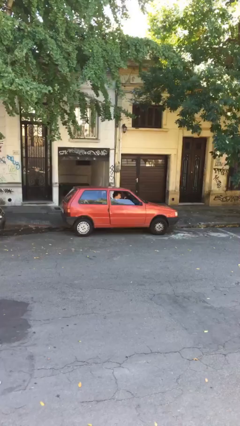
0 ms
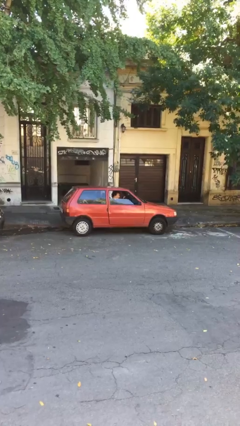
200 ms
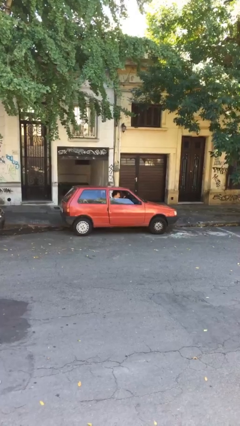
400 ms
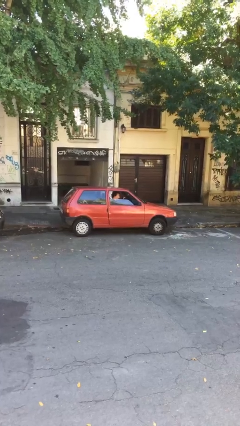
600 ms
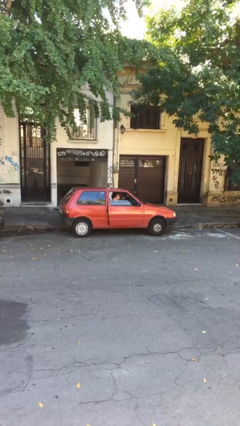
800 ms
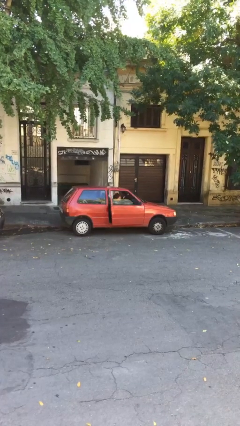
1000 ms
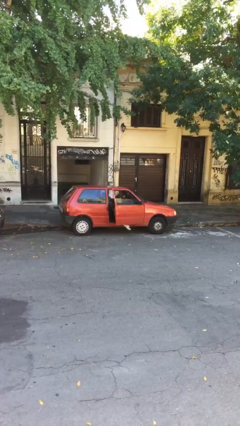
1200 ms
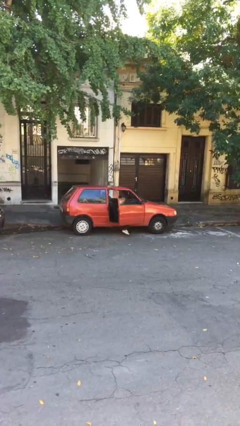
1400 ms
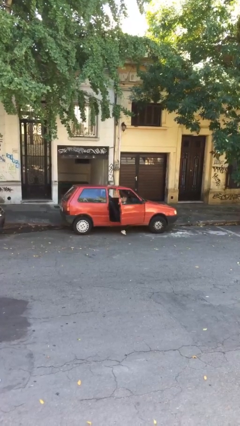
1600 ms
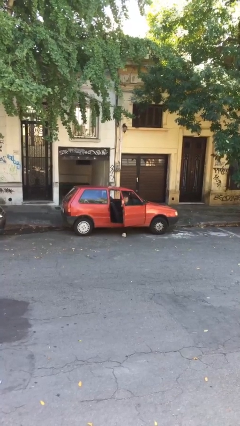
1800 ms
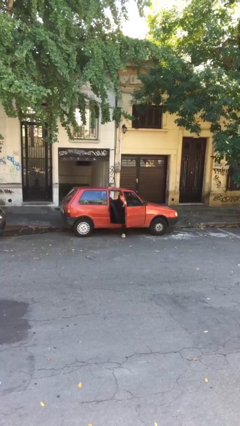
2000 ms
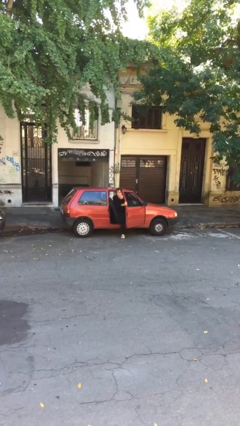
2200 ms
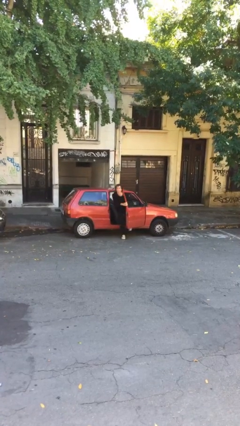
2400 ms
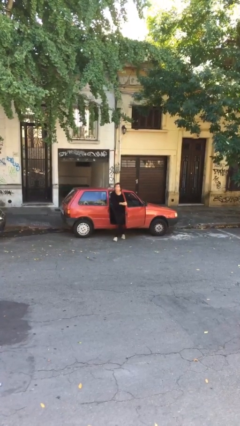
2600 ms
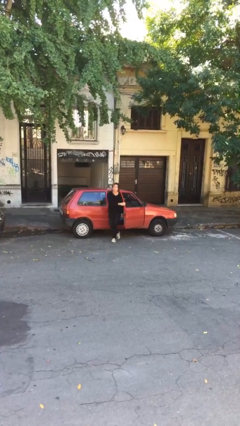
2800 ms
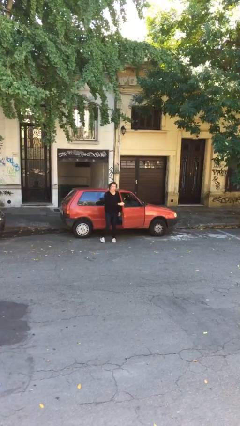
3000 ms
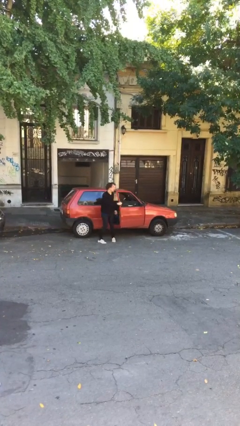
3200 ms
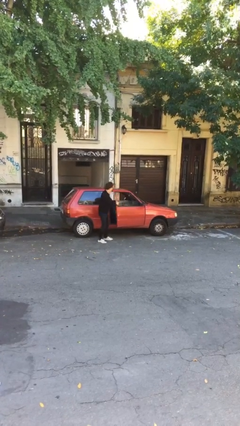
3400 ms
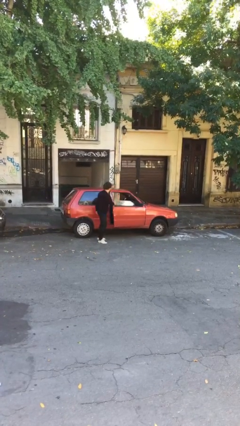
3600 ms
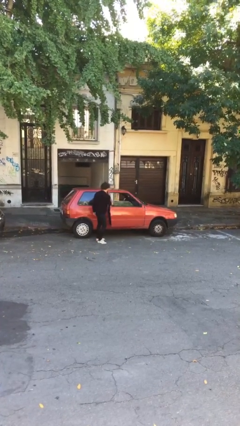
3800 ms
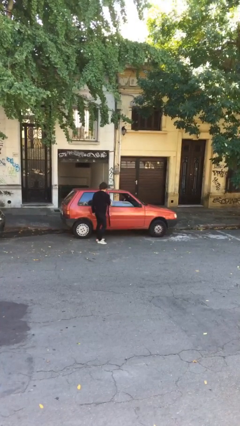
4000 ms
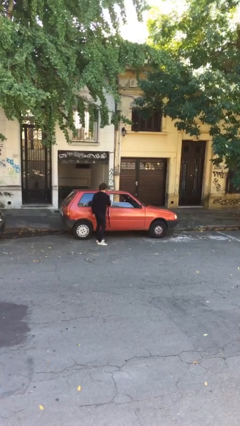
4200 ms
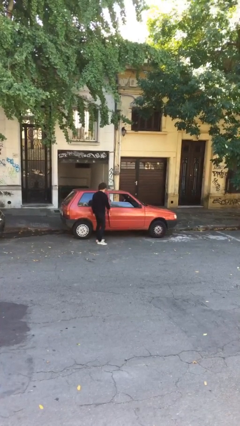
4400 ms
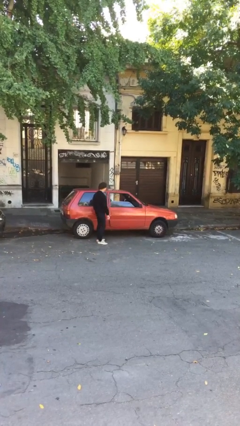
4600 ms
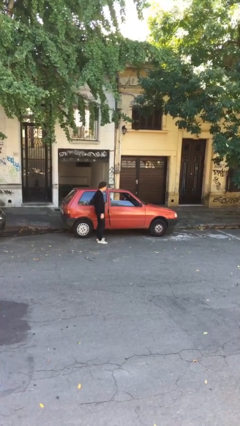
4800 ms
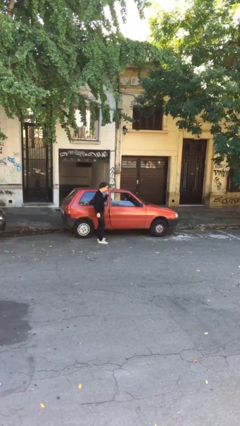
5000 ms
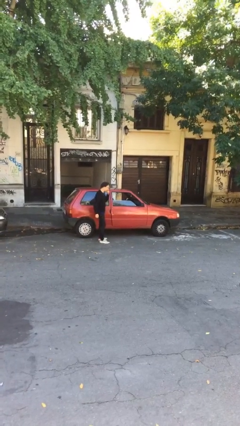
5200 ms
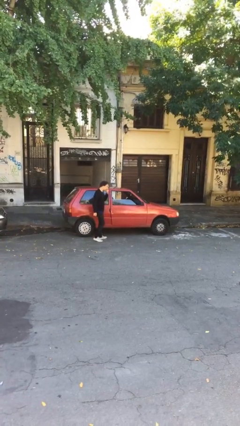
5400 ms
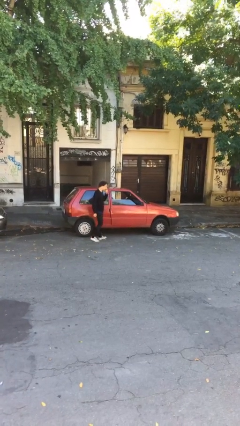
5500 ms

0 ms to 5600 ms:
car drops off person

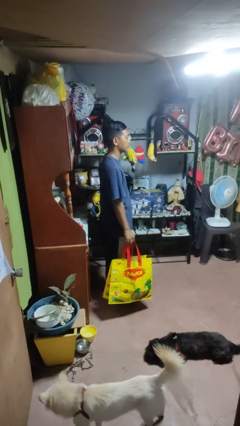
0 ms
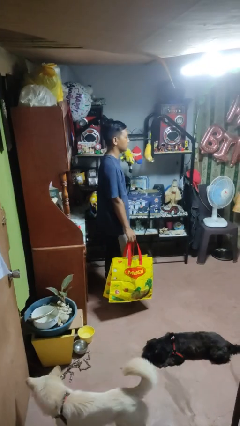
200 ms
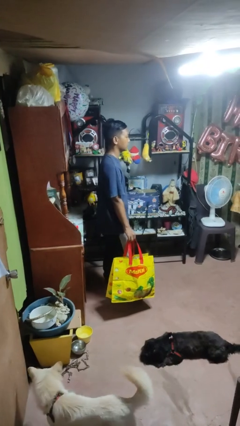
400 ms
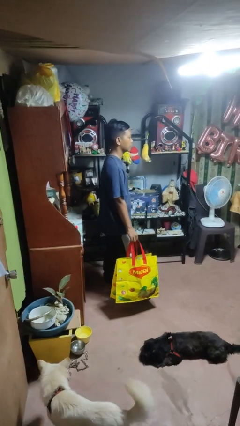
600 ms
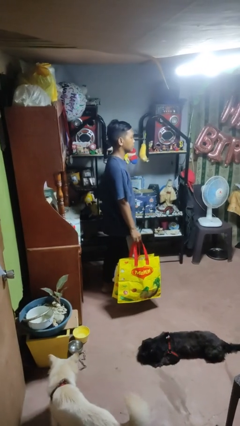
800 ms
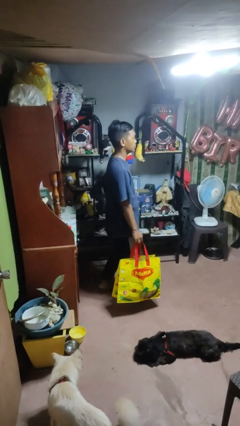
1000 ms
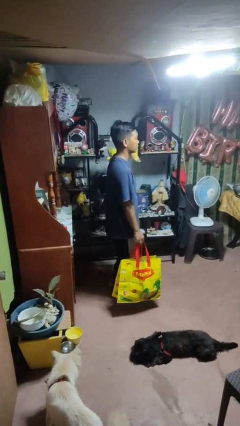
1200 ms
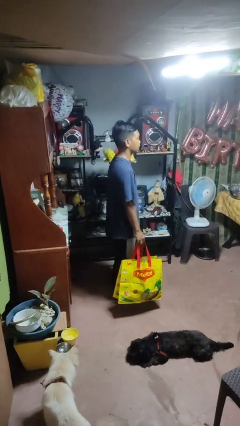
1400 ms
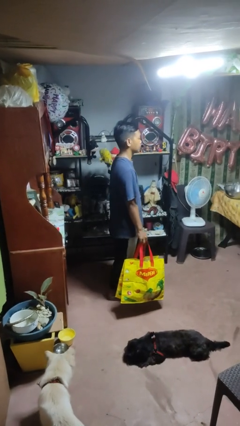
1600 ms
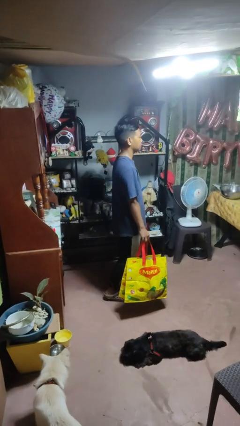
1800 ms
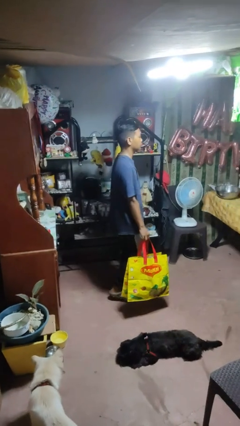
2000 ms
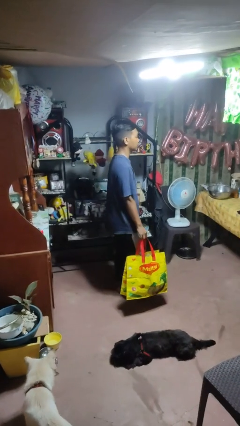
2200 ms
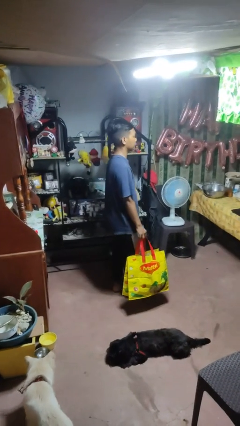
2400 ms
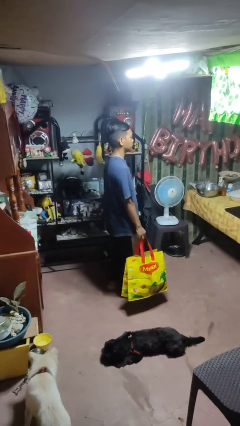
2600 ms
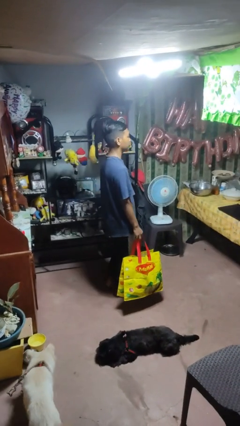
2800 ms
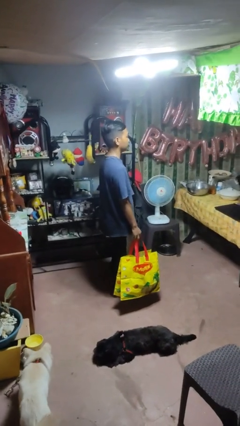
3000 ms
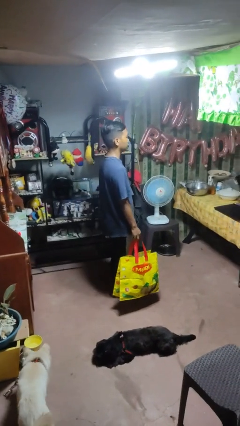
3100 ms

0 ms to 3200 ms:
person carries groceries

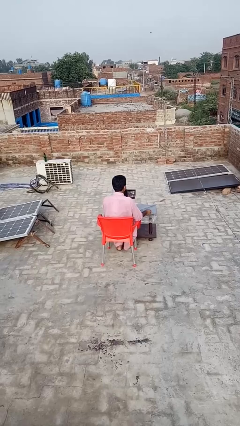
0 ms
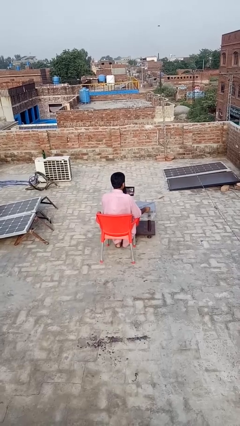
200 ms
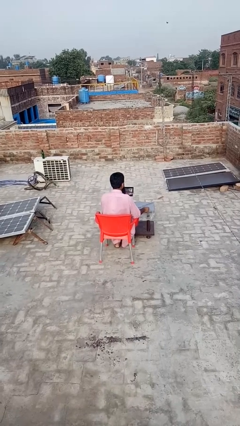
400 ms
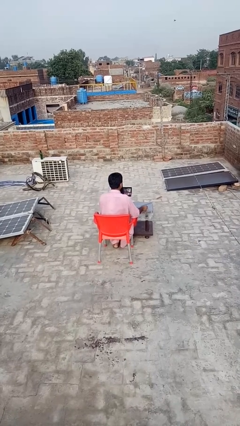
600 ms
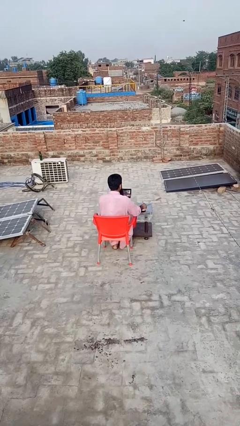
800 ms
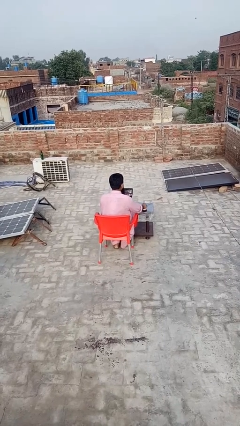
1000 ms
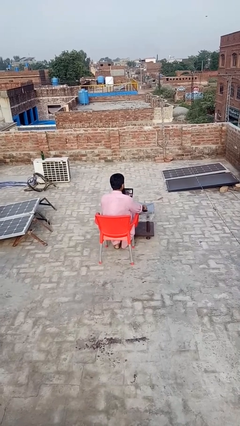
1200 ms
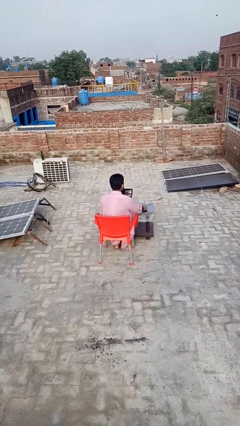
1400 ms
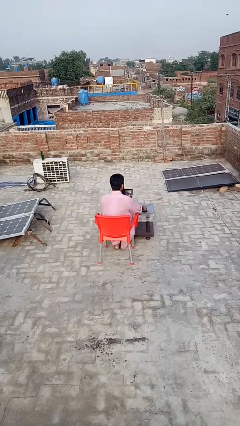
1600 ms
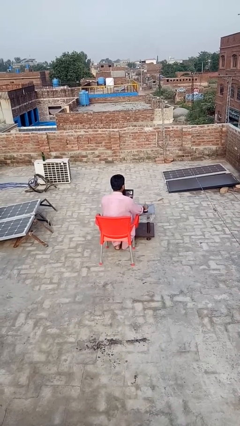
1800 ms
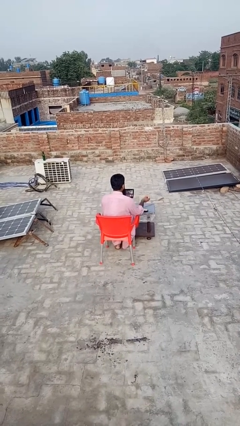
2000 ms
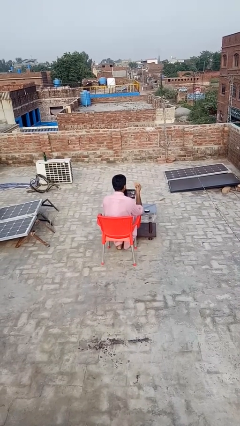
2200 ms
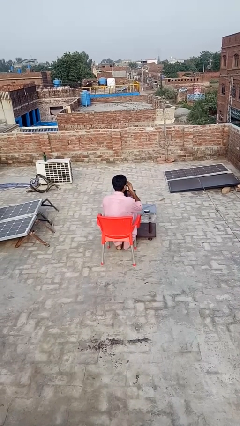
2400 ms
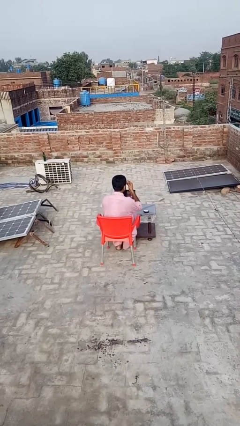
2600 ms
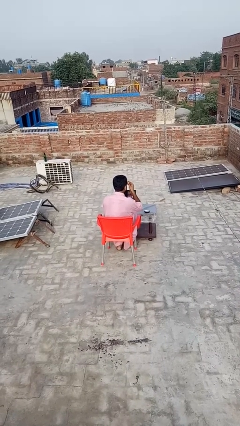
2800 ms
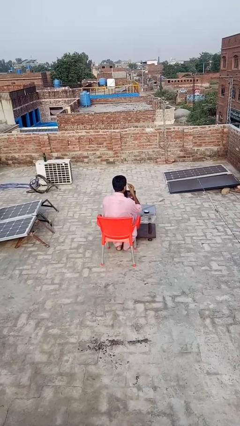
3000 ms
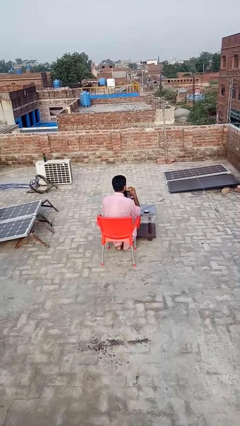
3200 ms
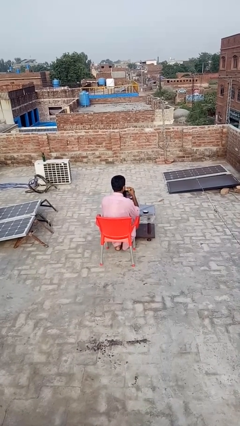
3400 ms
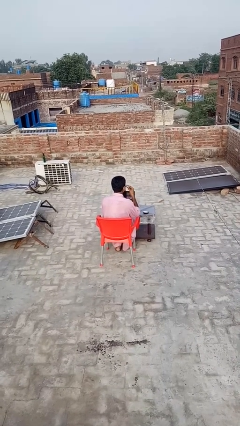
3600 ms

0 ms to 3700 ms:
person applies foundation makeup

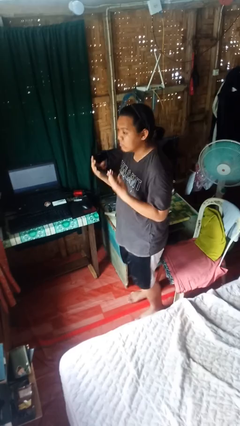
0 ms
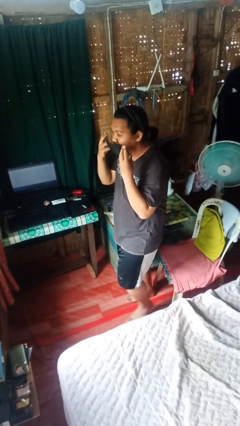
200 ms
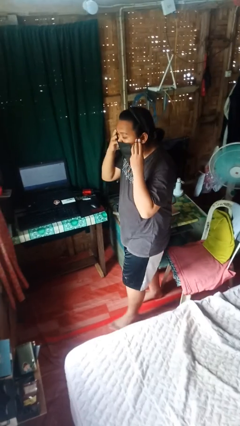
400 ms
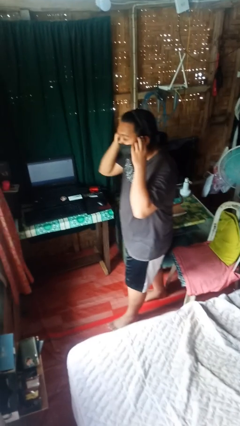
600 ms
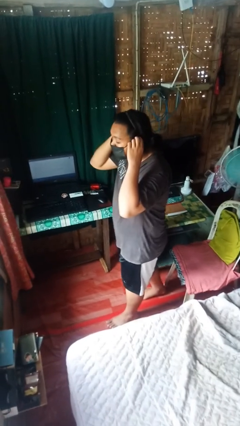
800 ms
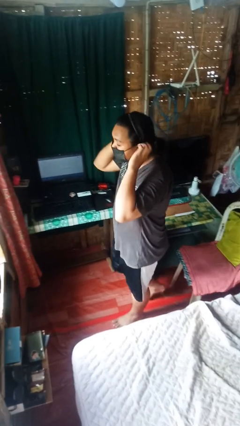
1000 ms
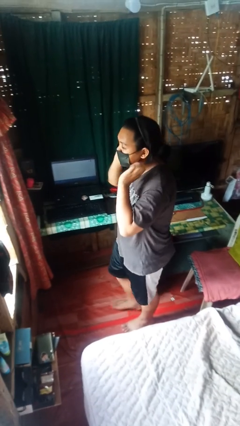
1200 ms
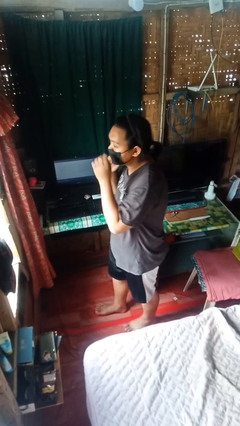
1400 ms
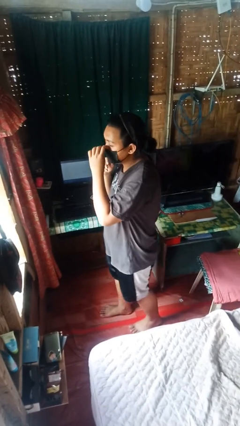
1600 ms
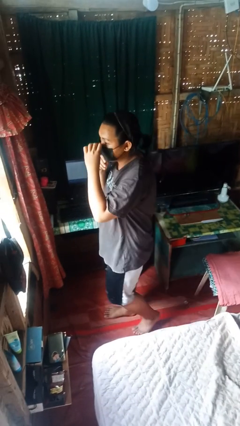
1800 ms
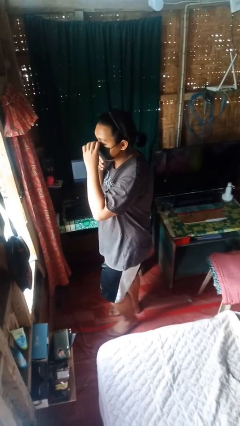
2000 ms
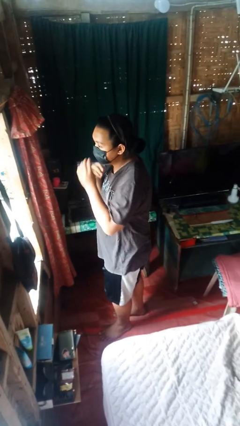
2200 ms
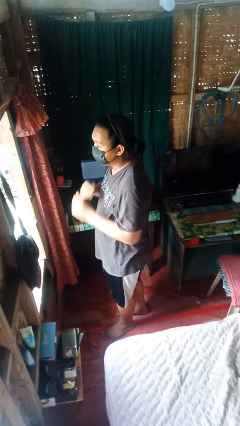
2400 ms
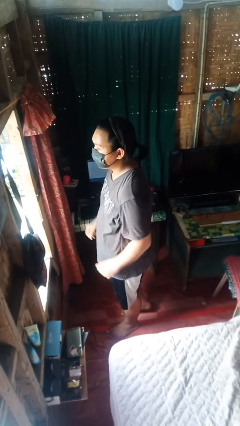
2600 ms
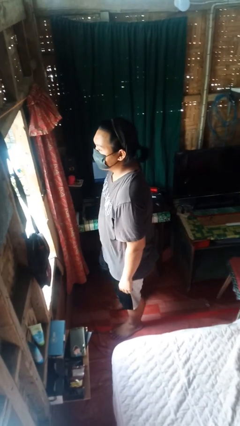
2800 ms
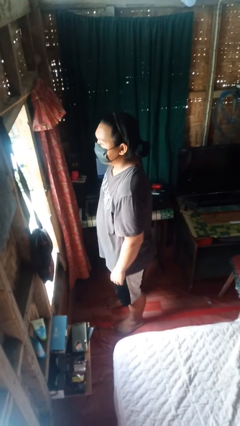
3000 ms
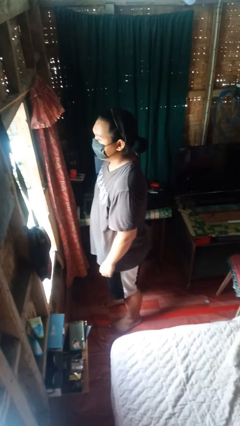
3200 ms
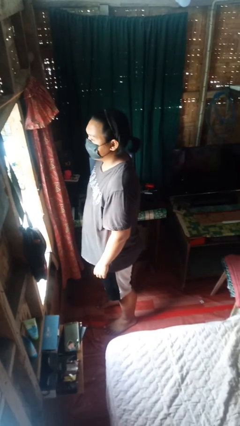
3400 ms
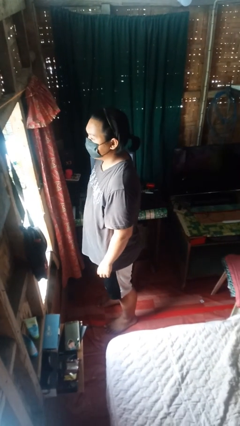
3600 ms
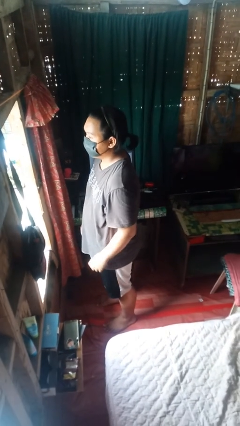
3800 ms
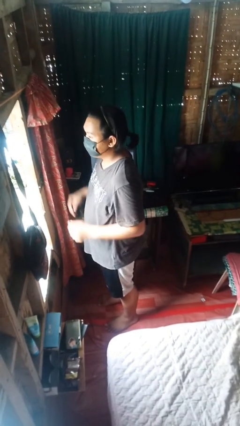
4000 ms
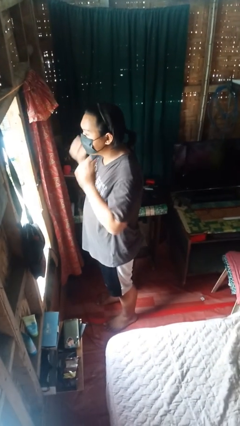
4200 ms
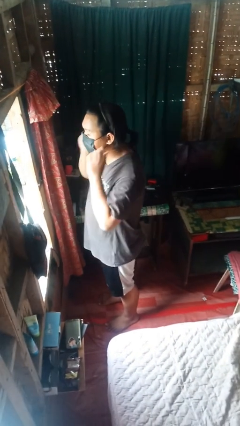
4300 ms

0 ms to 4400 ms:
person puts on facemask

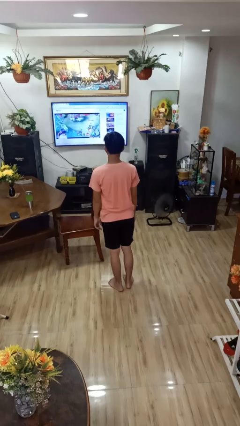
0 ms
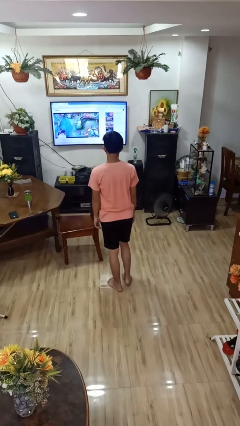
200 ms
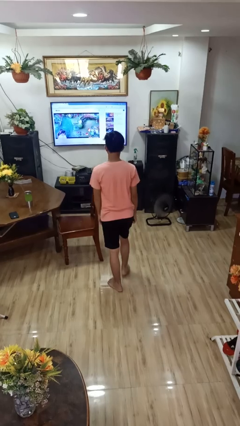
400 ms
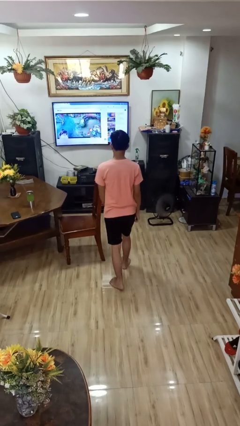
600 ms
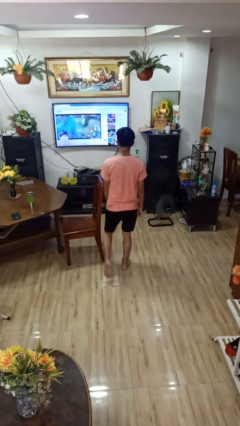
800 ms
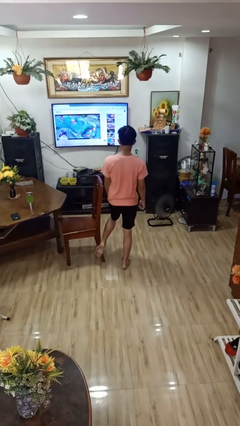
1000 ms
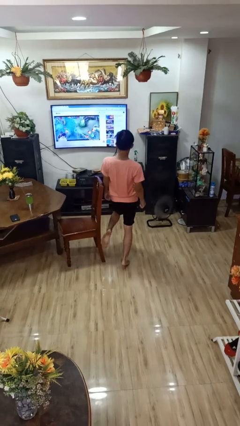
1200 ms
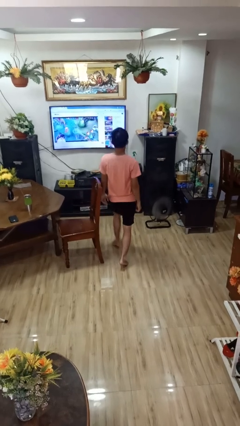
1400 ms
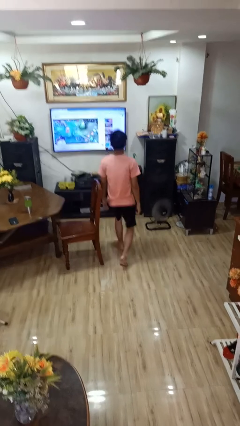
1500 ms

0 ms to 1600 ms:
person trips on object on floor
